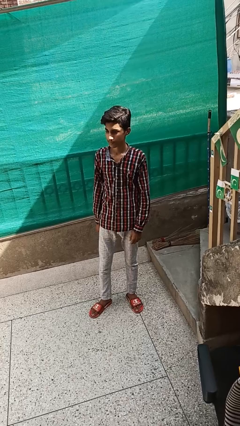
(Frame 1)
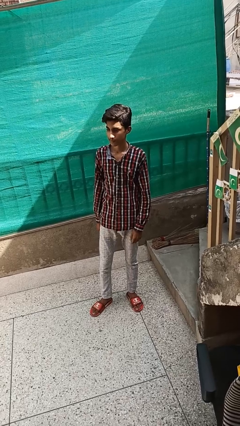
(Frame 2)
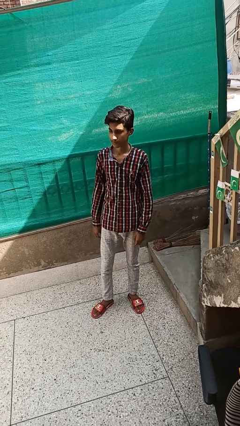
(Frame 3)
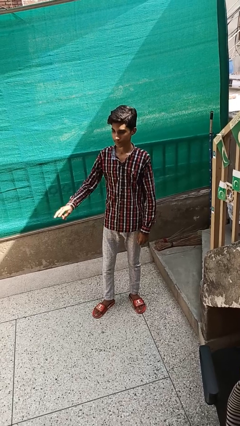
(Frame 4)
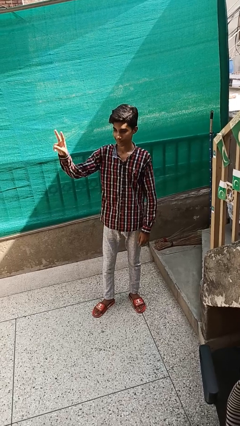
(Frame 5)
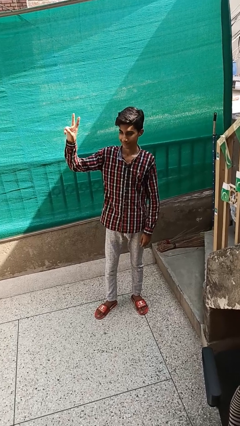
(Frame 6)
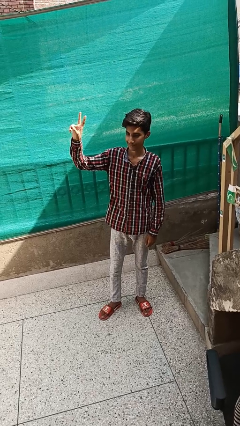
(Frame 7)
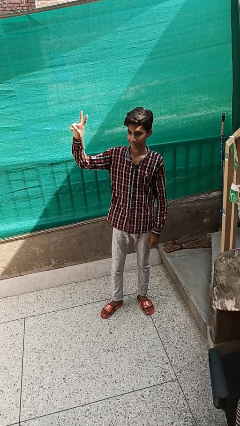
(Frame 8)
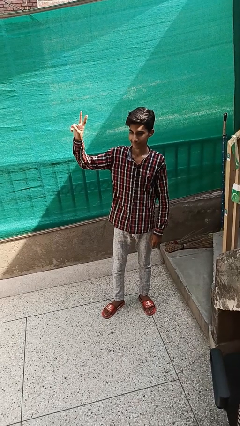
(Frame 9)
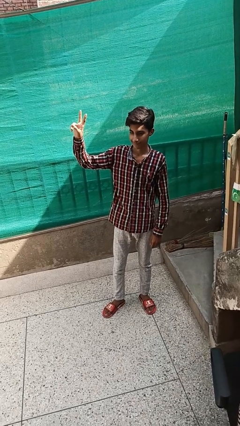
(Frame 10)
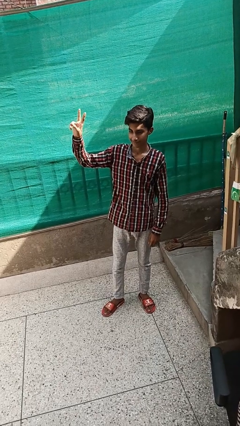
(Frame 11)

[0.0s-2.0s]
person gestures peace

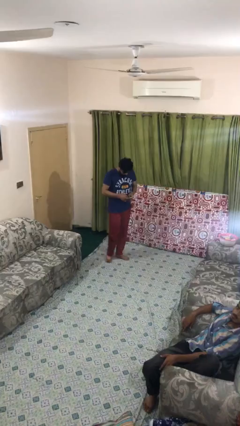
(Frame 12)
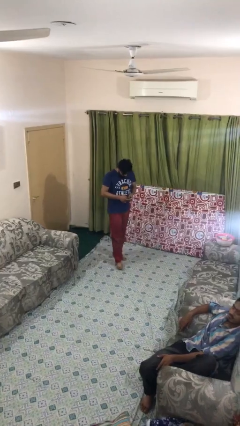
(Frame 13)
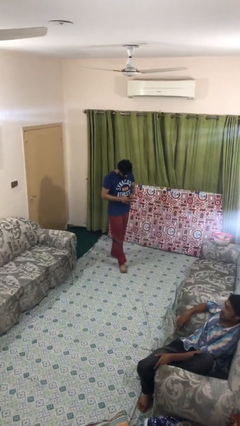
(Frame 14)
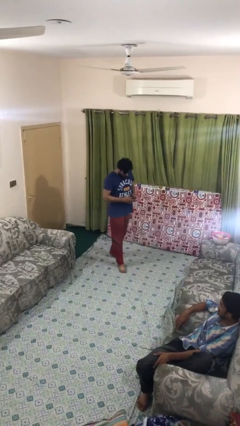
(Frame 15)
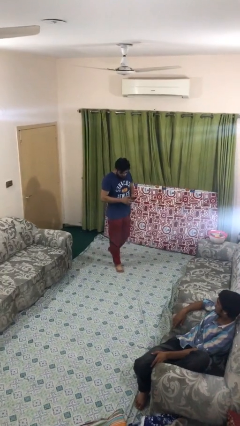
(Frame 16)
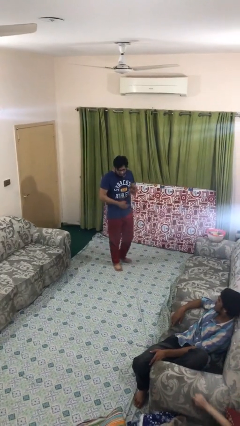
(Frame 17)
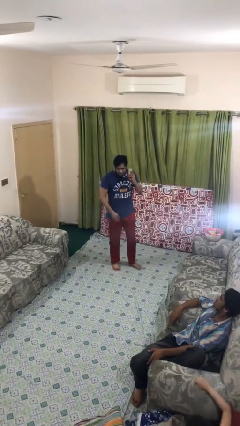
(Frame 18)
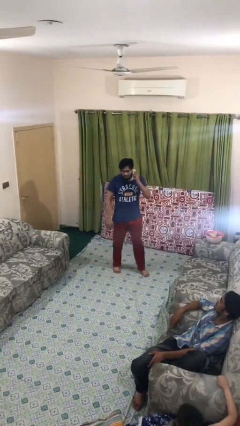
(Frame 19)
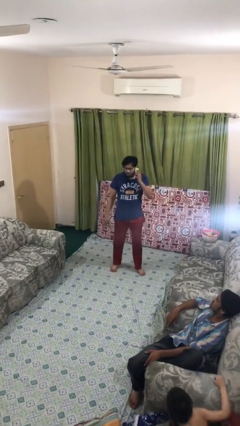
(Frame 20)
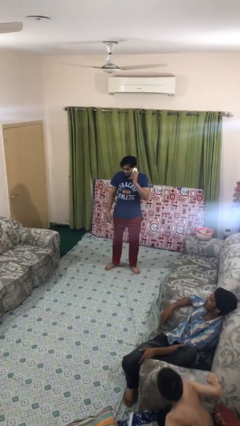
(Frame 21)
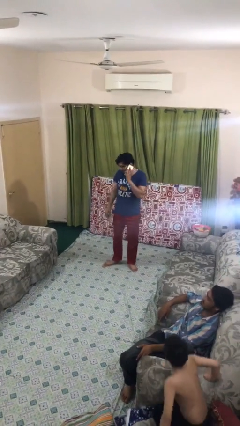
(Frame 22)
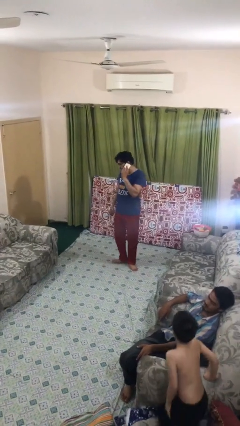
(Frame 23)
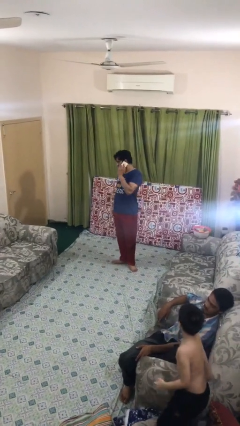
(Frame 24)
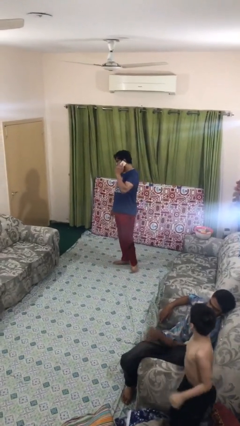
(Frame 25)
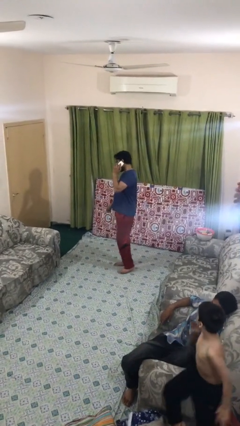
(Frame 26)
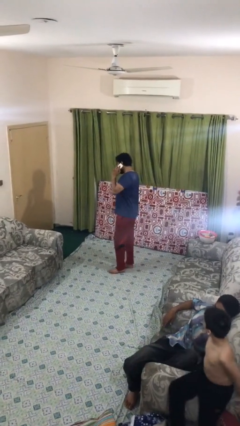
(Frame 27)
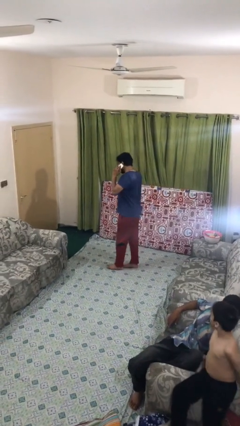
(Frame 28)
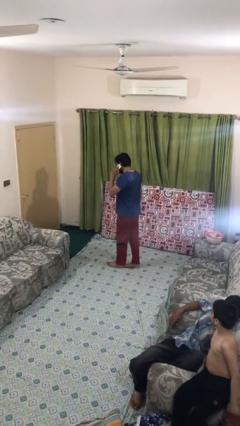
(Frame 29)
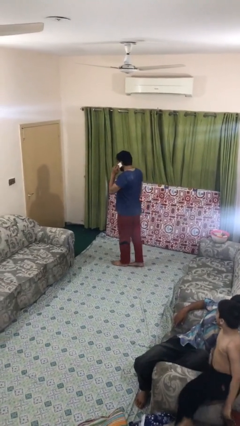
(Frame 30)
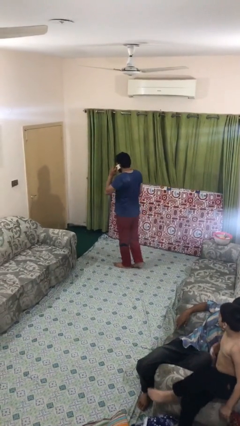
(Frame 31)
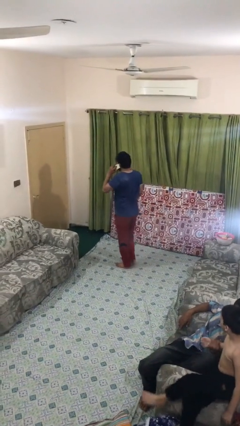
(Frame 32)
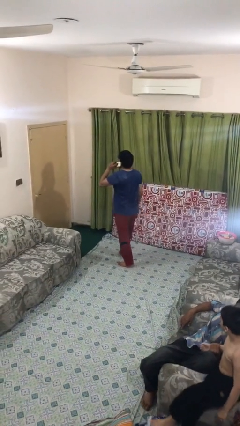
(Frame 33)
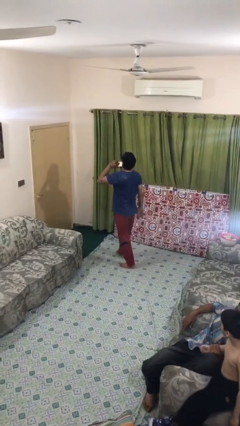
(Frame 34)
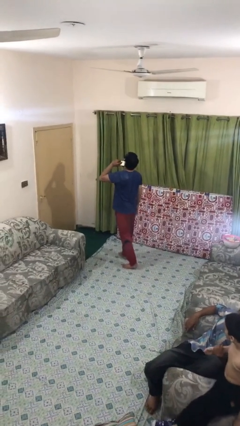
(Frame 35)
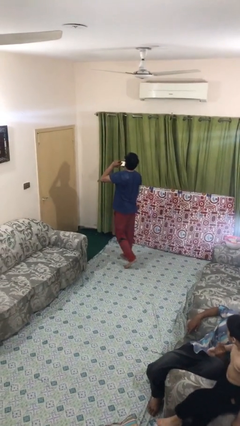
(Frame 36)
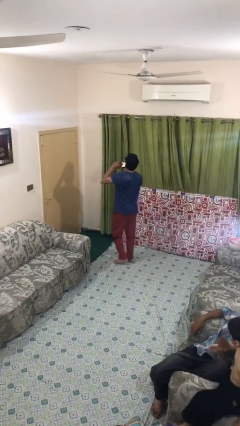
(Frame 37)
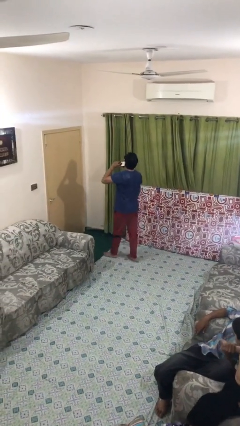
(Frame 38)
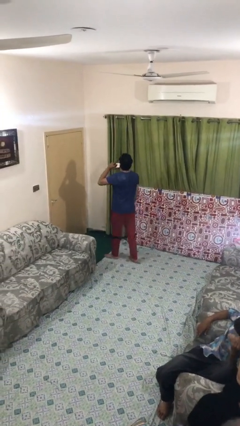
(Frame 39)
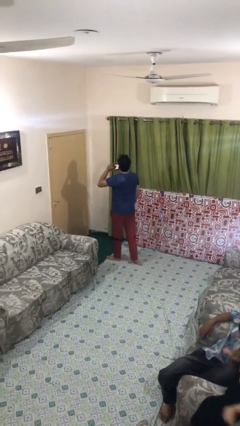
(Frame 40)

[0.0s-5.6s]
person talks on phone

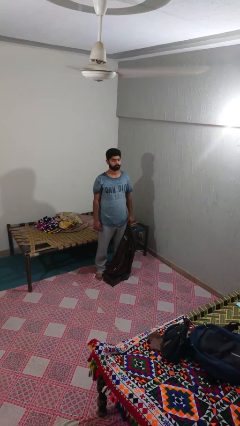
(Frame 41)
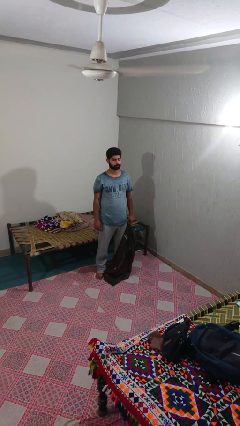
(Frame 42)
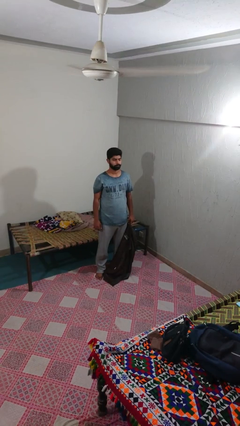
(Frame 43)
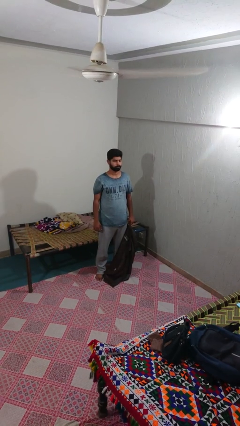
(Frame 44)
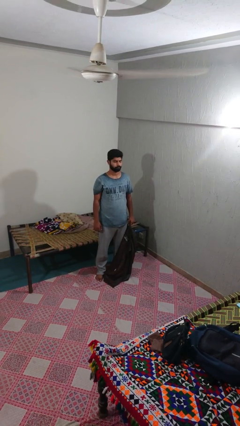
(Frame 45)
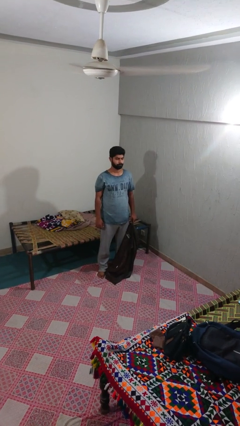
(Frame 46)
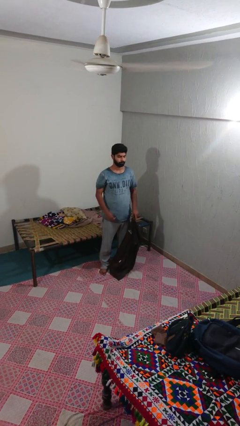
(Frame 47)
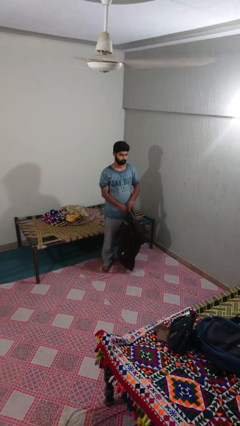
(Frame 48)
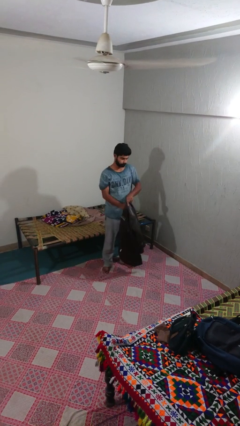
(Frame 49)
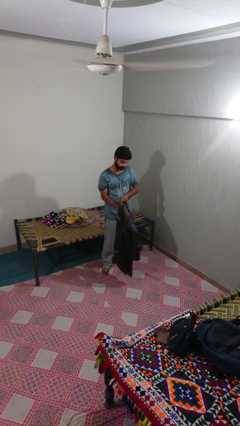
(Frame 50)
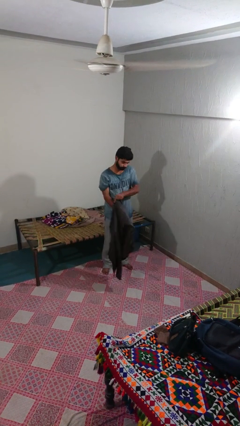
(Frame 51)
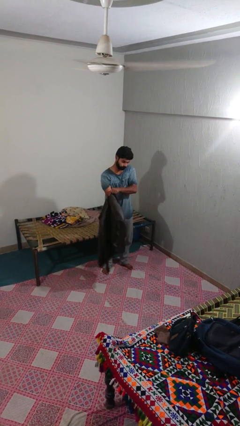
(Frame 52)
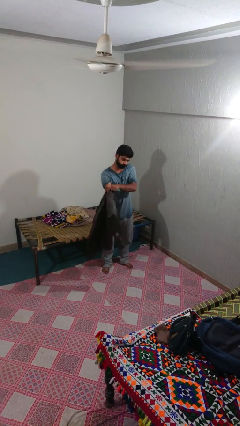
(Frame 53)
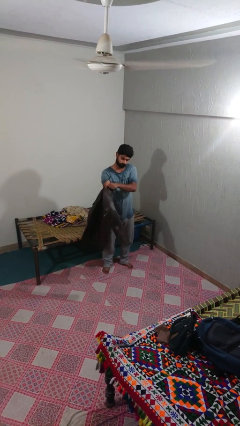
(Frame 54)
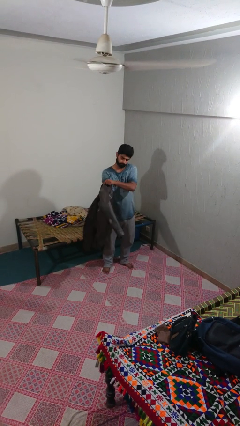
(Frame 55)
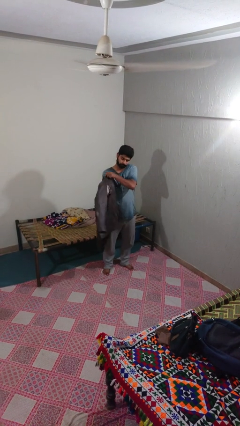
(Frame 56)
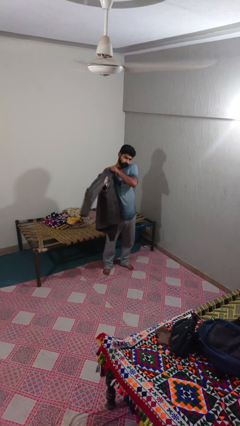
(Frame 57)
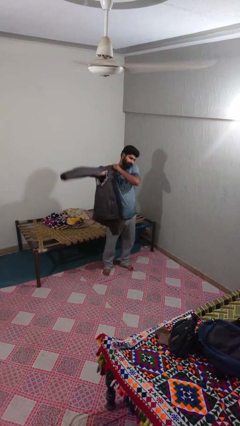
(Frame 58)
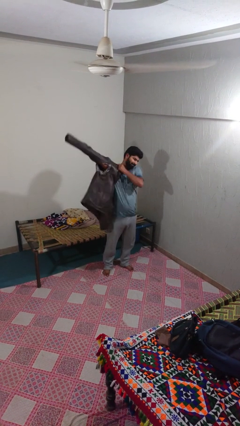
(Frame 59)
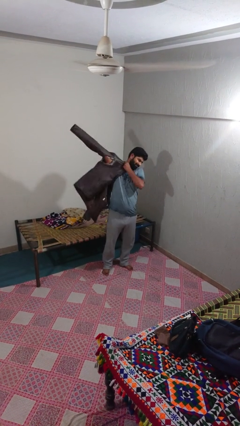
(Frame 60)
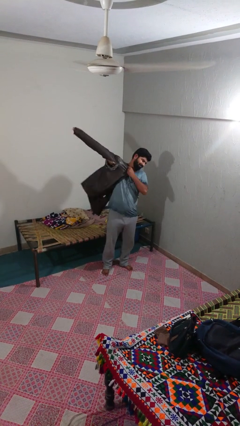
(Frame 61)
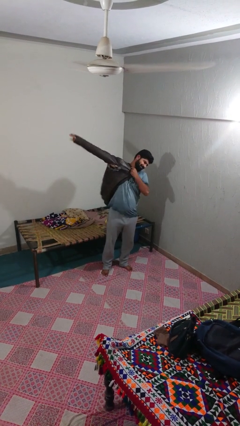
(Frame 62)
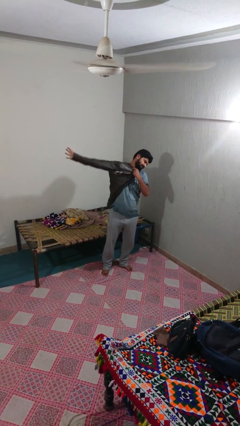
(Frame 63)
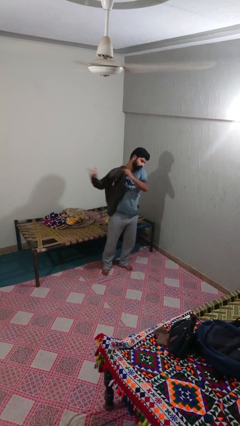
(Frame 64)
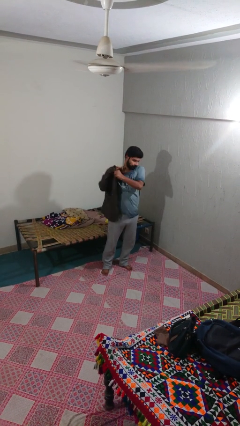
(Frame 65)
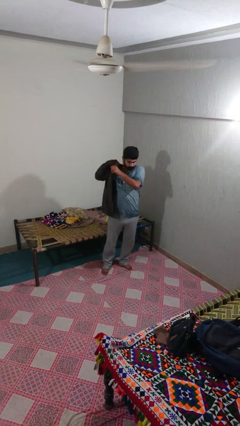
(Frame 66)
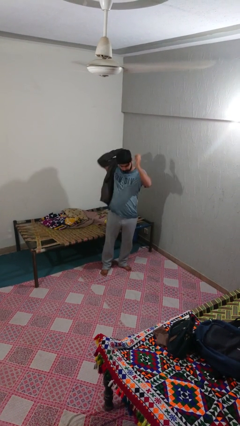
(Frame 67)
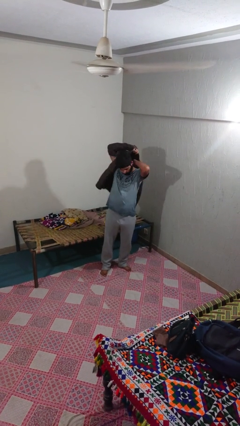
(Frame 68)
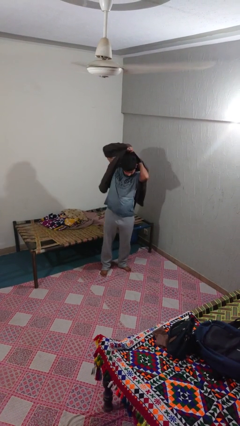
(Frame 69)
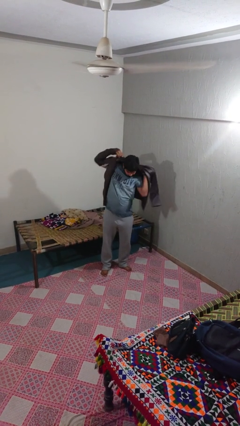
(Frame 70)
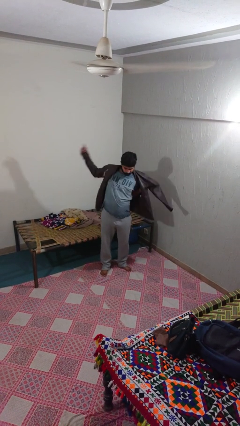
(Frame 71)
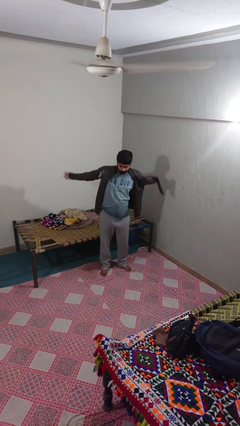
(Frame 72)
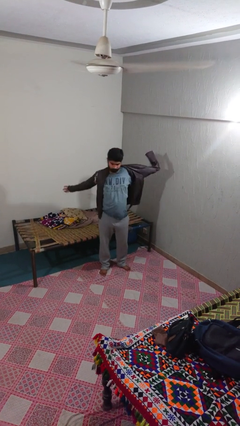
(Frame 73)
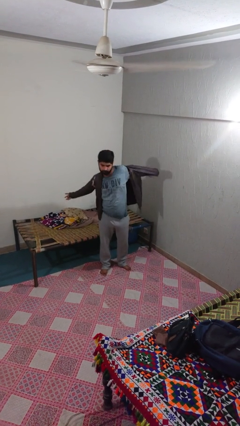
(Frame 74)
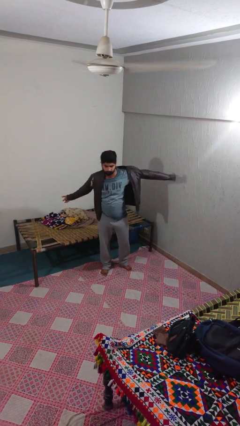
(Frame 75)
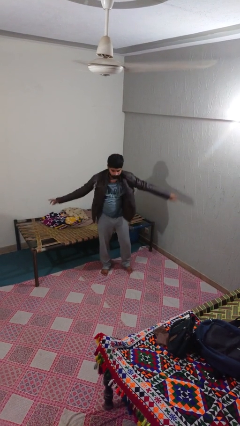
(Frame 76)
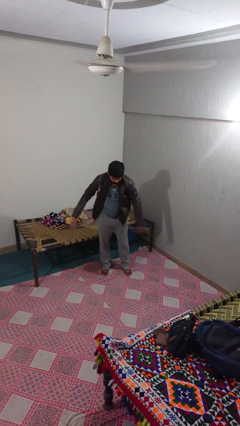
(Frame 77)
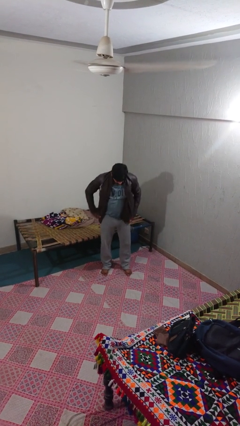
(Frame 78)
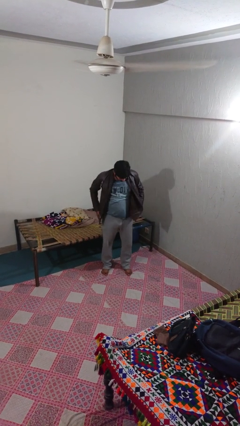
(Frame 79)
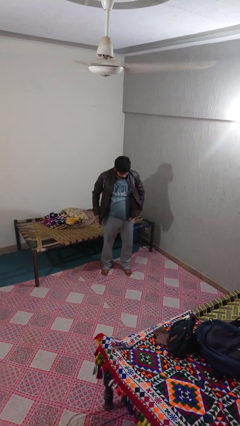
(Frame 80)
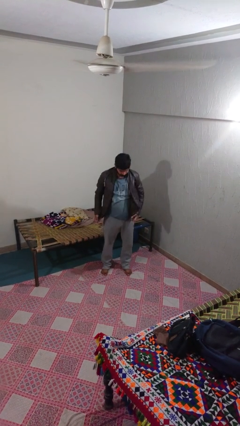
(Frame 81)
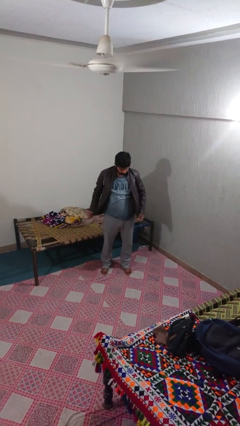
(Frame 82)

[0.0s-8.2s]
person puts on jacket

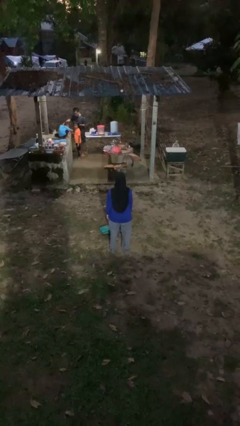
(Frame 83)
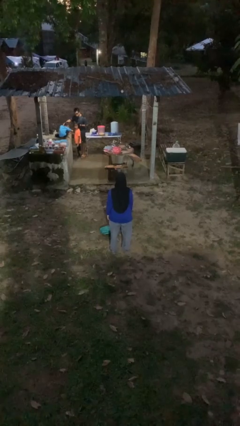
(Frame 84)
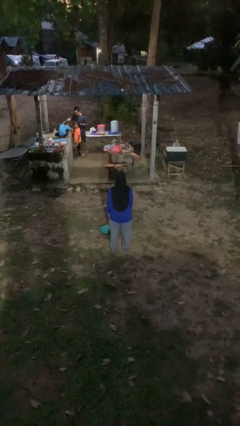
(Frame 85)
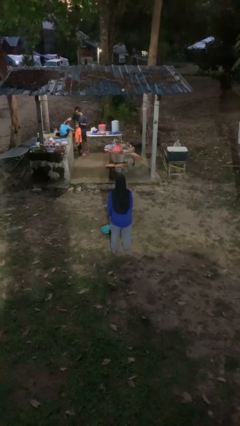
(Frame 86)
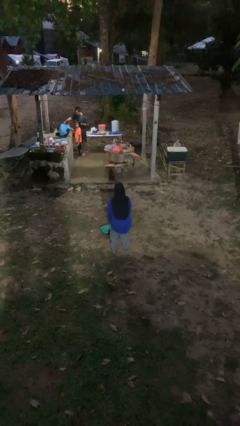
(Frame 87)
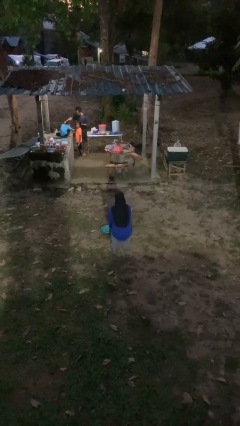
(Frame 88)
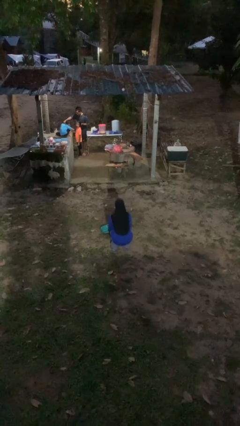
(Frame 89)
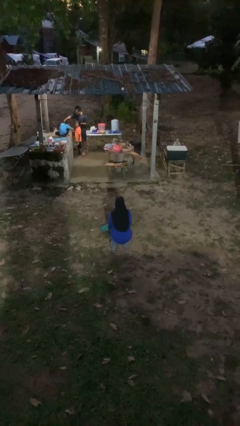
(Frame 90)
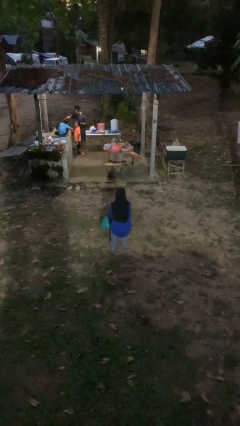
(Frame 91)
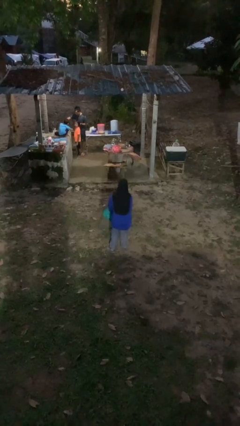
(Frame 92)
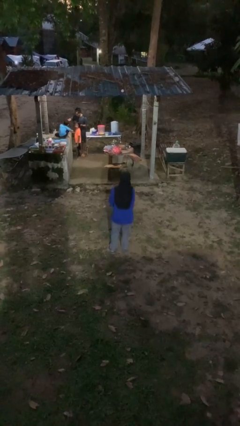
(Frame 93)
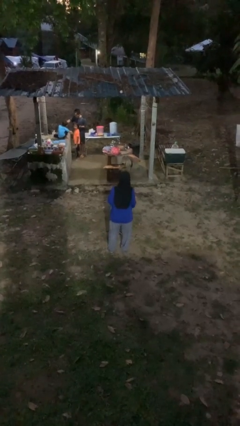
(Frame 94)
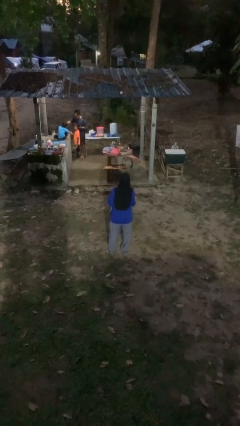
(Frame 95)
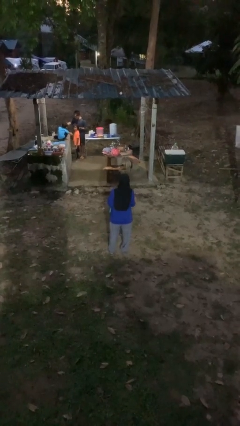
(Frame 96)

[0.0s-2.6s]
person picks up object from floor
